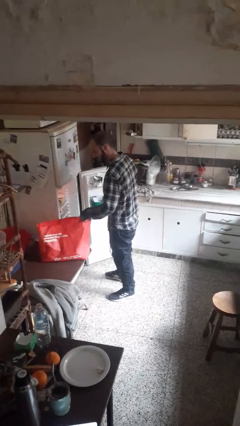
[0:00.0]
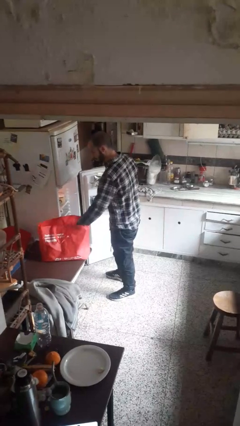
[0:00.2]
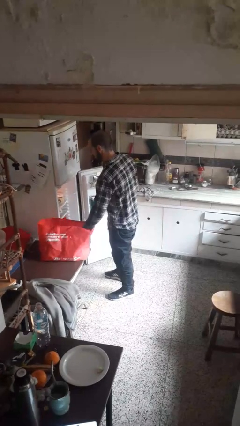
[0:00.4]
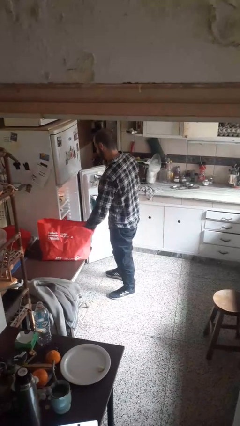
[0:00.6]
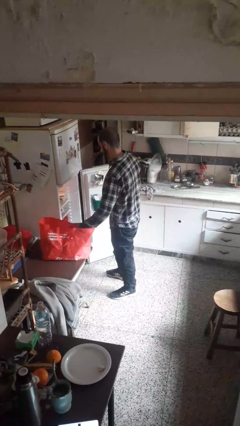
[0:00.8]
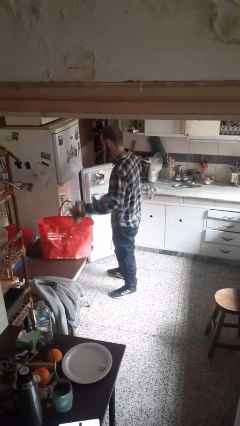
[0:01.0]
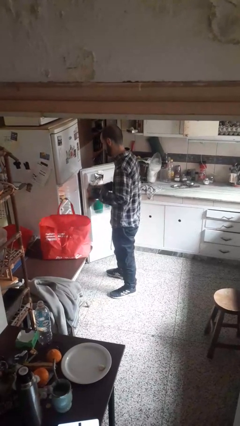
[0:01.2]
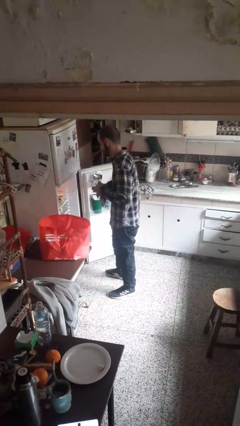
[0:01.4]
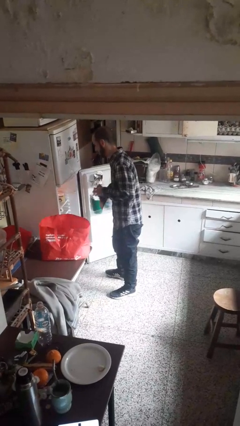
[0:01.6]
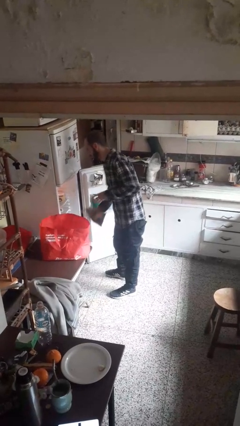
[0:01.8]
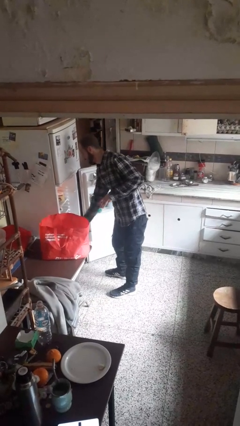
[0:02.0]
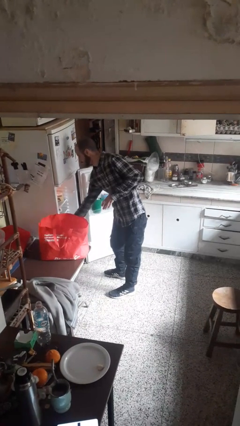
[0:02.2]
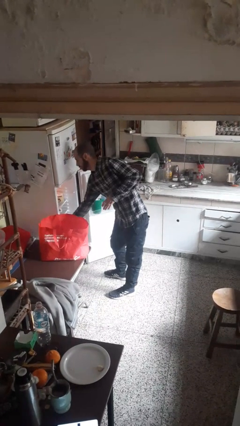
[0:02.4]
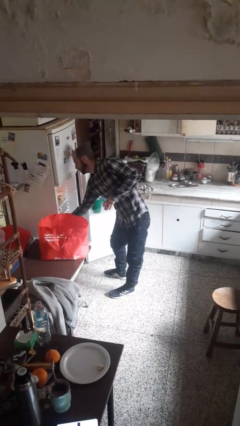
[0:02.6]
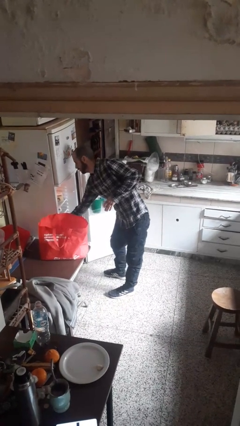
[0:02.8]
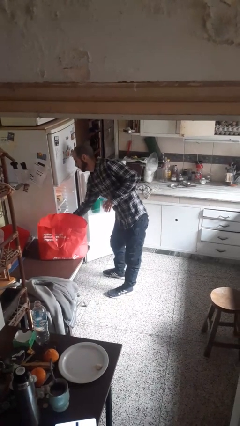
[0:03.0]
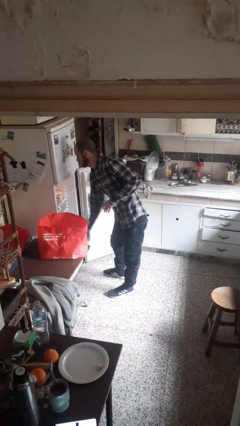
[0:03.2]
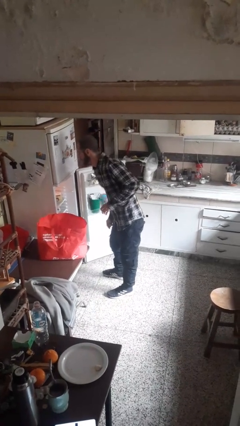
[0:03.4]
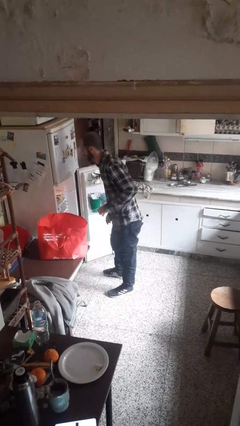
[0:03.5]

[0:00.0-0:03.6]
person loads groceries into refrigerator

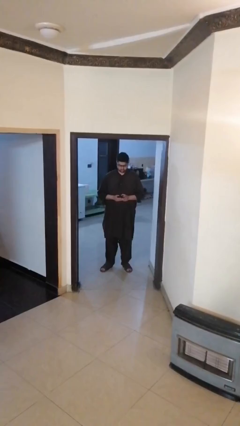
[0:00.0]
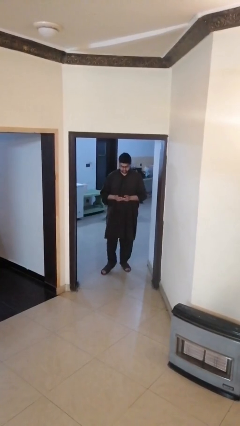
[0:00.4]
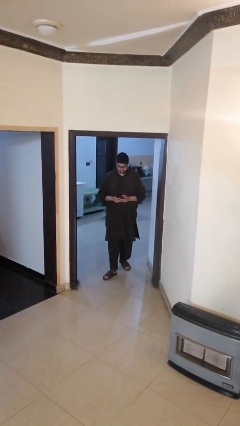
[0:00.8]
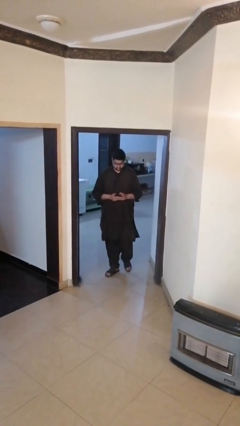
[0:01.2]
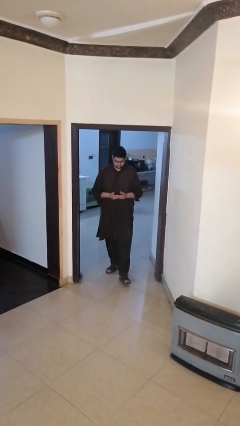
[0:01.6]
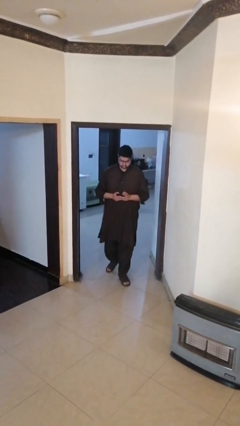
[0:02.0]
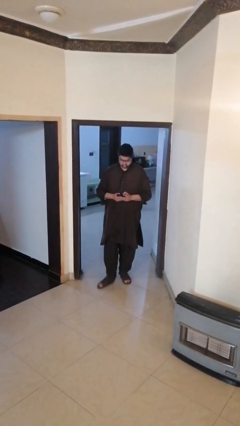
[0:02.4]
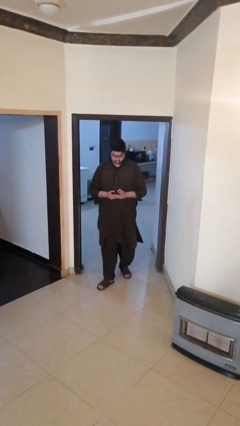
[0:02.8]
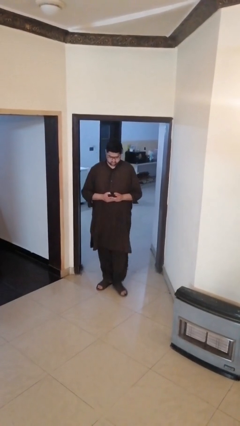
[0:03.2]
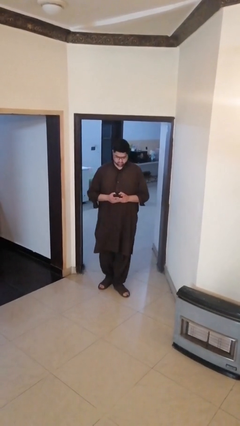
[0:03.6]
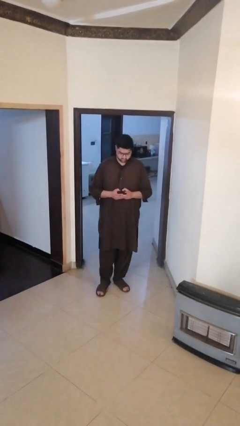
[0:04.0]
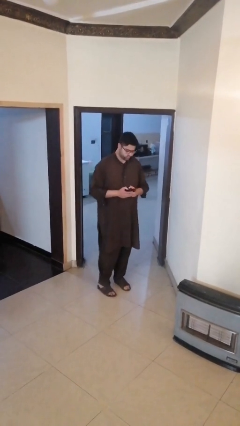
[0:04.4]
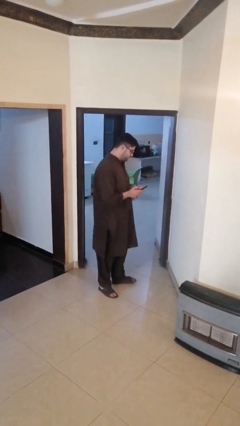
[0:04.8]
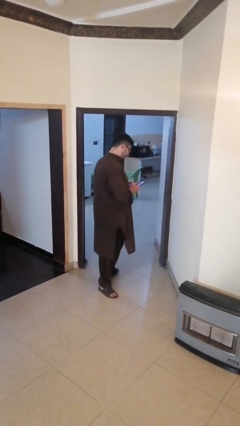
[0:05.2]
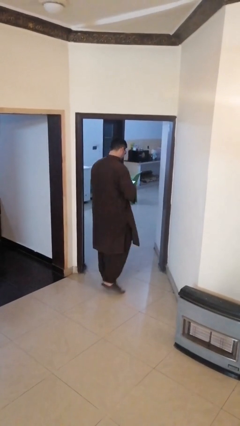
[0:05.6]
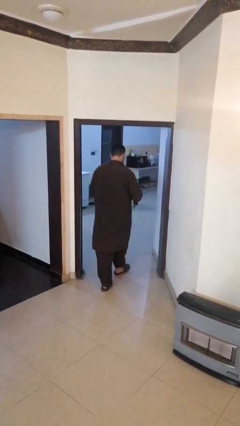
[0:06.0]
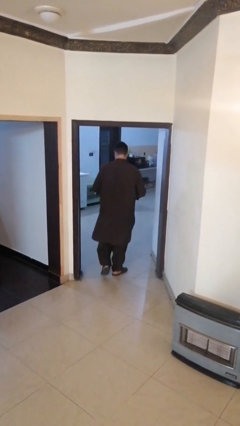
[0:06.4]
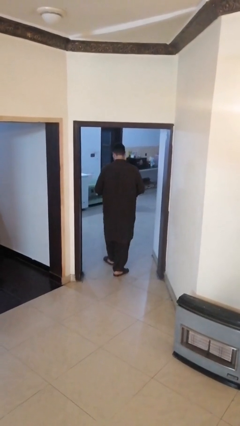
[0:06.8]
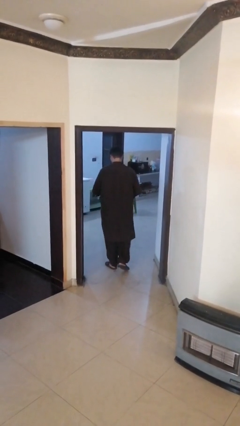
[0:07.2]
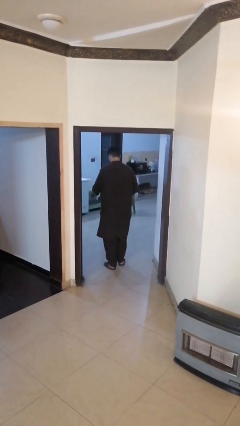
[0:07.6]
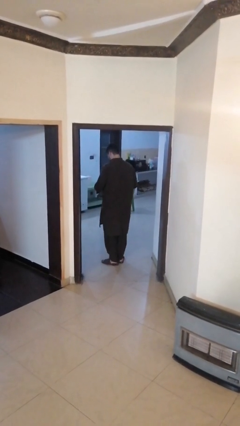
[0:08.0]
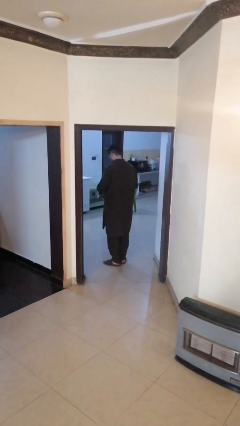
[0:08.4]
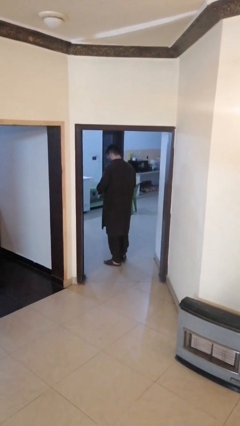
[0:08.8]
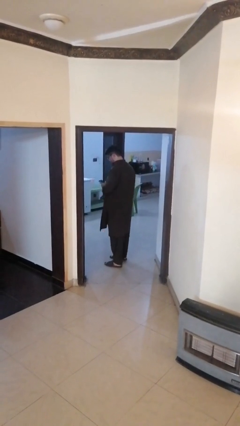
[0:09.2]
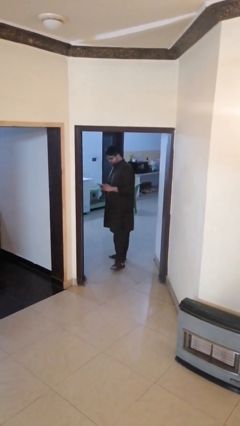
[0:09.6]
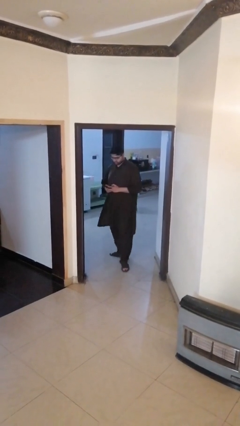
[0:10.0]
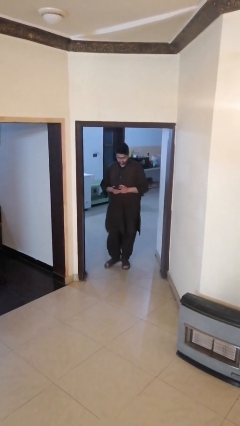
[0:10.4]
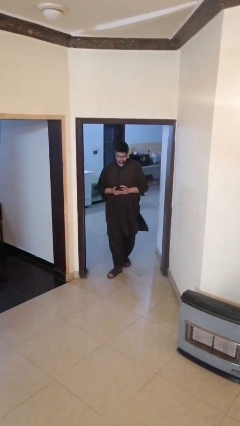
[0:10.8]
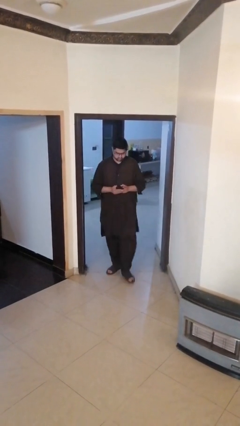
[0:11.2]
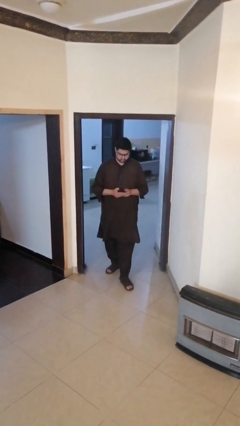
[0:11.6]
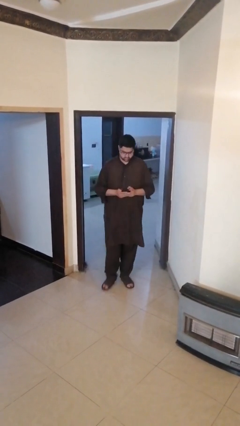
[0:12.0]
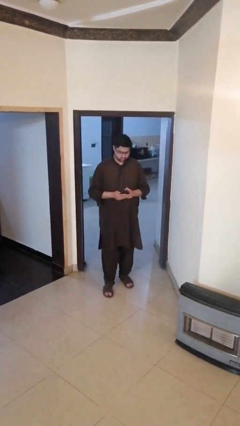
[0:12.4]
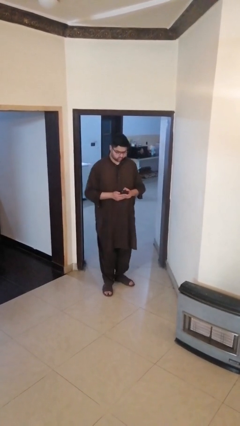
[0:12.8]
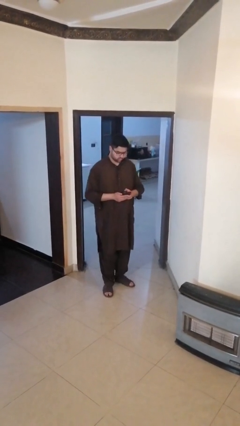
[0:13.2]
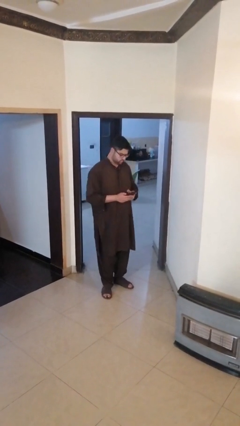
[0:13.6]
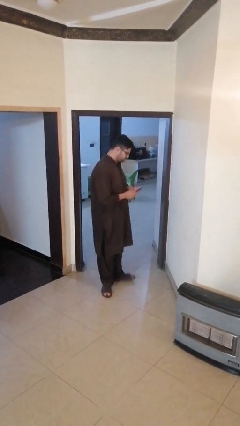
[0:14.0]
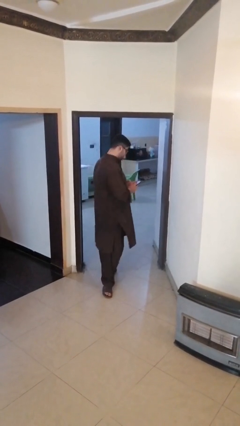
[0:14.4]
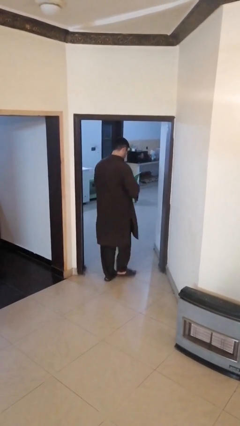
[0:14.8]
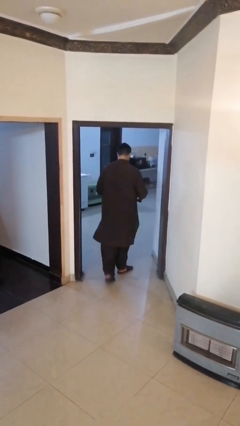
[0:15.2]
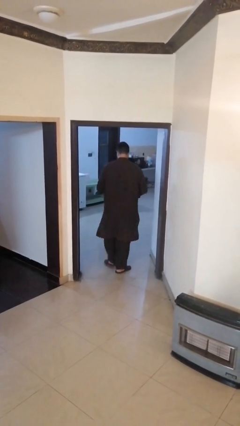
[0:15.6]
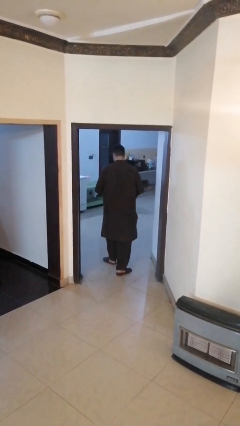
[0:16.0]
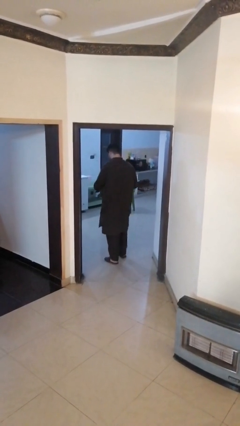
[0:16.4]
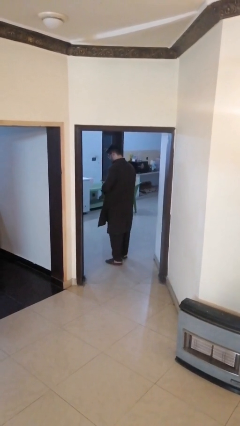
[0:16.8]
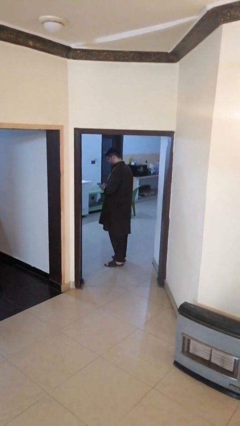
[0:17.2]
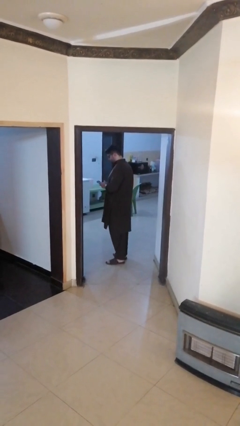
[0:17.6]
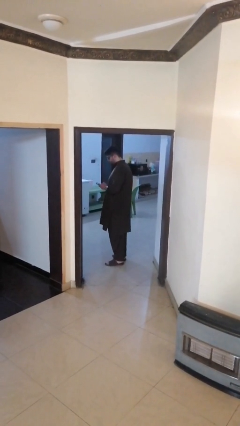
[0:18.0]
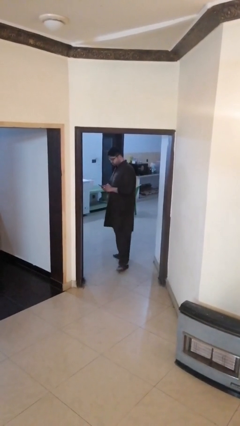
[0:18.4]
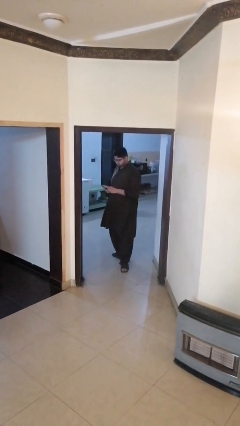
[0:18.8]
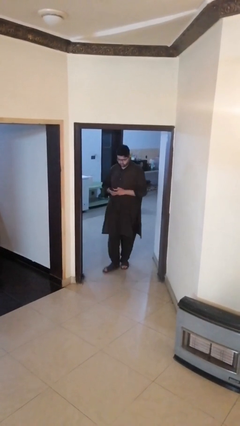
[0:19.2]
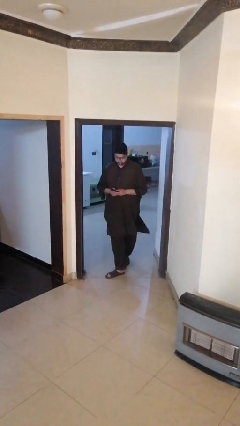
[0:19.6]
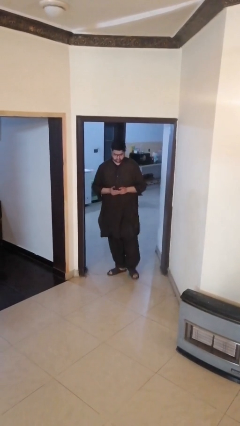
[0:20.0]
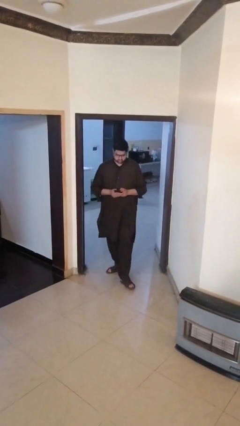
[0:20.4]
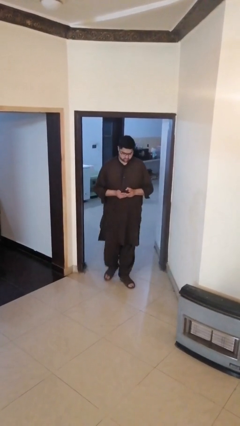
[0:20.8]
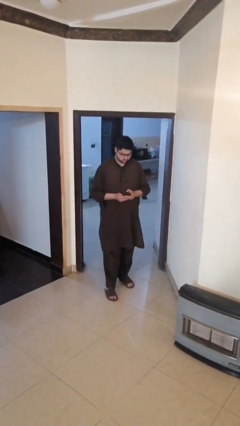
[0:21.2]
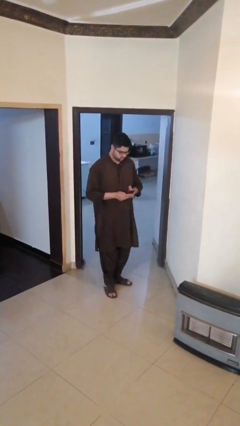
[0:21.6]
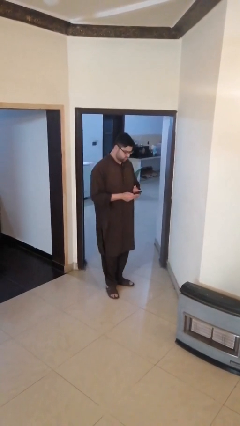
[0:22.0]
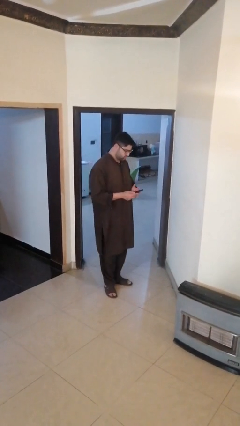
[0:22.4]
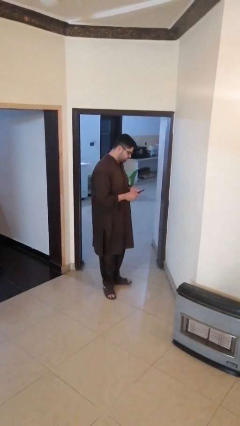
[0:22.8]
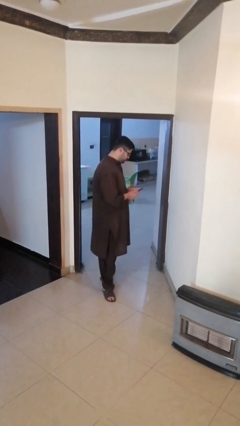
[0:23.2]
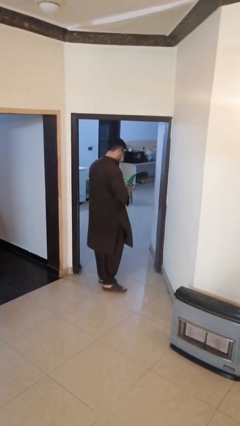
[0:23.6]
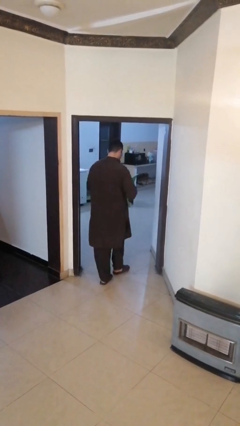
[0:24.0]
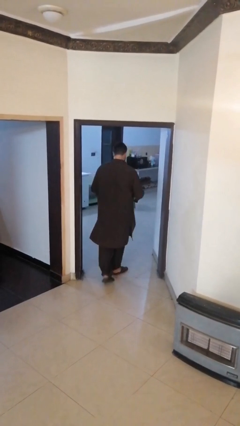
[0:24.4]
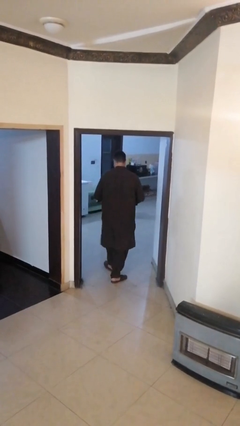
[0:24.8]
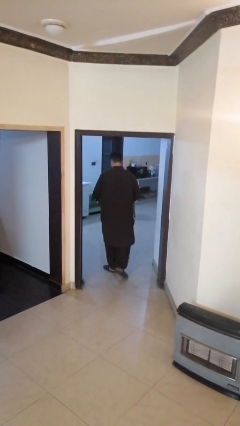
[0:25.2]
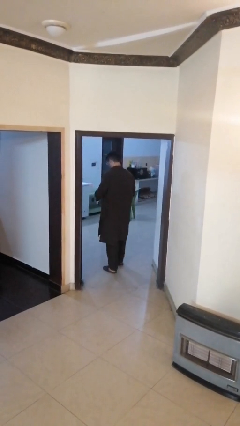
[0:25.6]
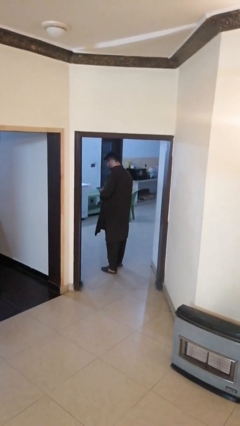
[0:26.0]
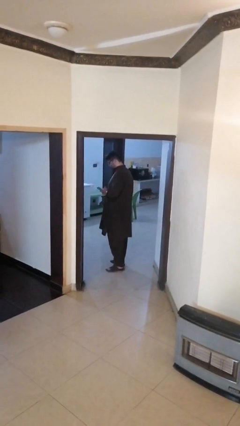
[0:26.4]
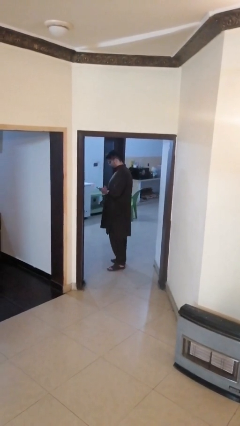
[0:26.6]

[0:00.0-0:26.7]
person texts on phone

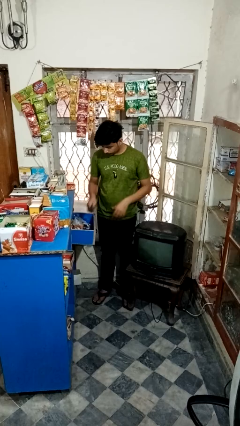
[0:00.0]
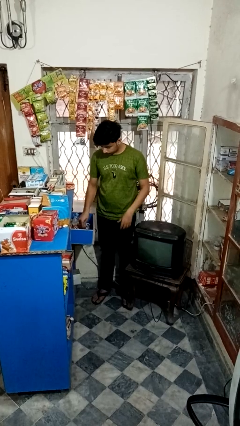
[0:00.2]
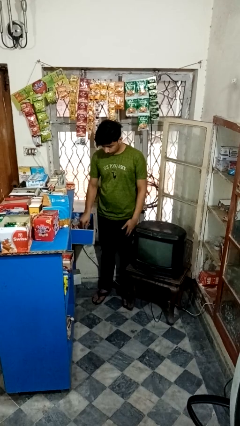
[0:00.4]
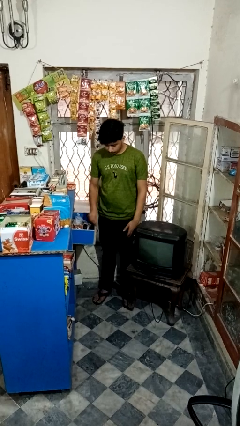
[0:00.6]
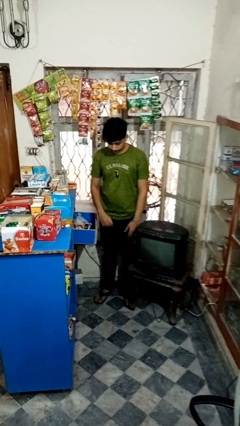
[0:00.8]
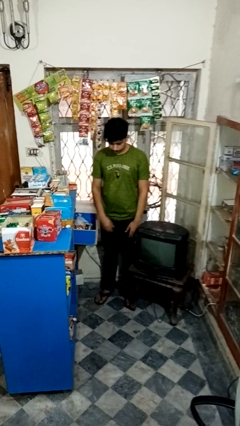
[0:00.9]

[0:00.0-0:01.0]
person puts object into kitchen drawer
